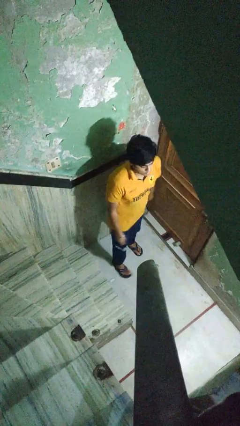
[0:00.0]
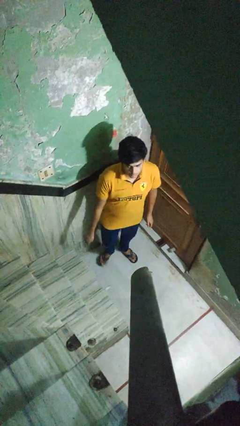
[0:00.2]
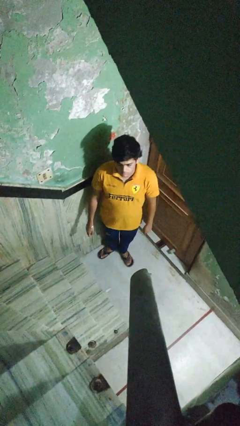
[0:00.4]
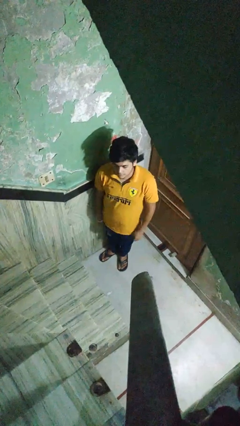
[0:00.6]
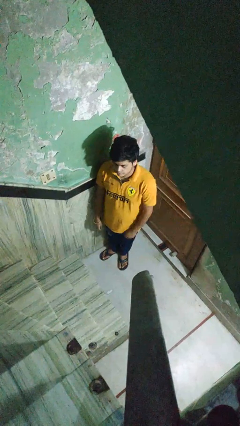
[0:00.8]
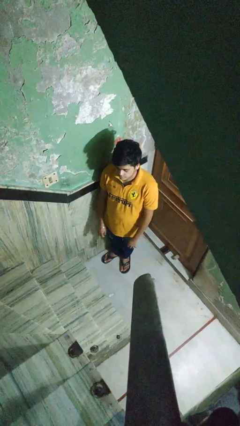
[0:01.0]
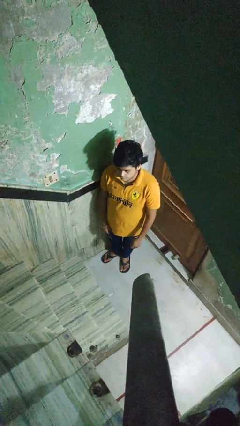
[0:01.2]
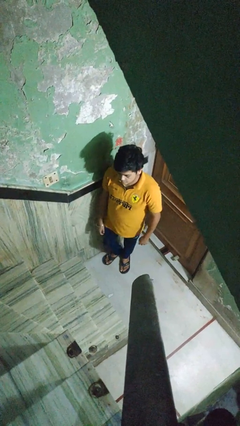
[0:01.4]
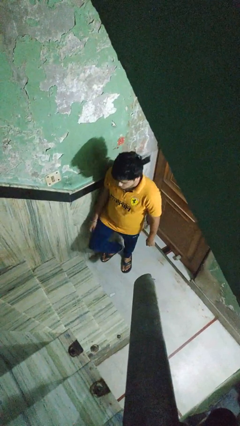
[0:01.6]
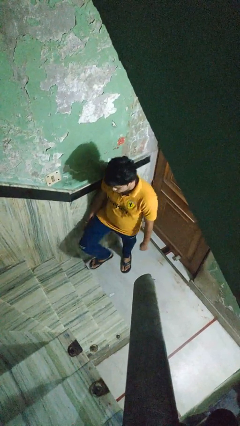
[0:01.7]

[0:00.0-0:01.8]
person climbs down stairs

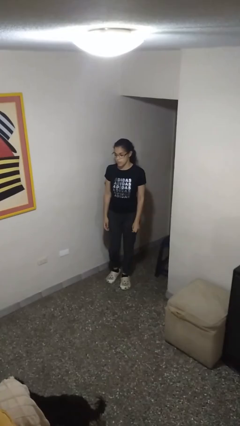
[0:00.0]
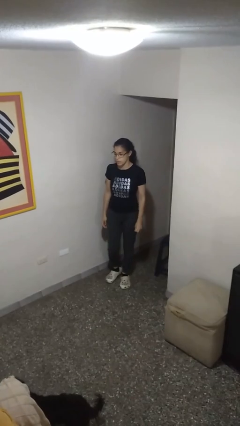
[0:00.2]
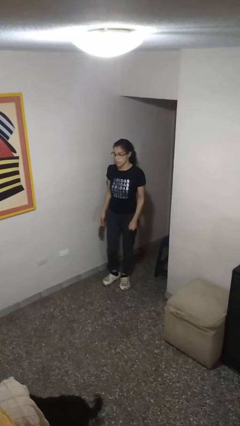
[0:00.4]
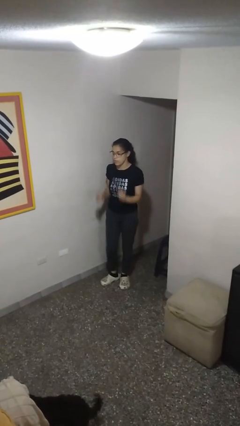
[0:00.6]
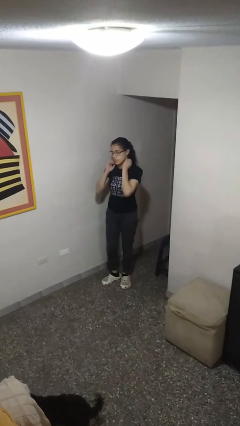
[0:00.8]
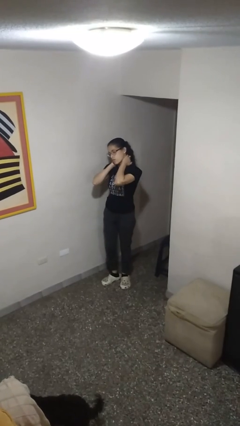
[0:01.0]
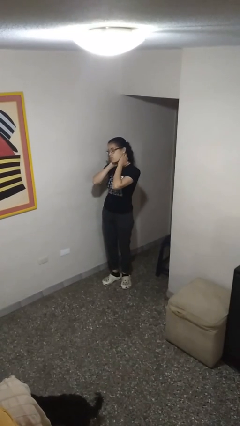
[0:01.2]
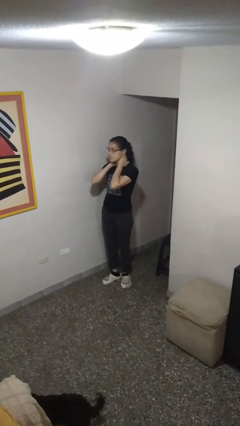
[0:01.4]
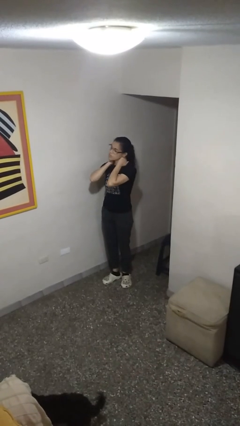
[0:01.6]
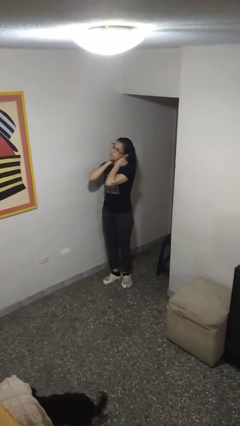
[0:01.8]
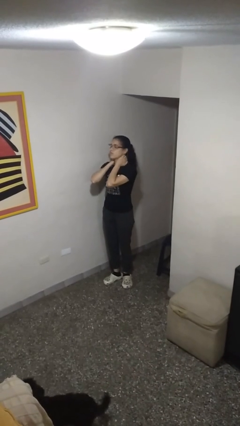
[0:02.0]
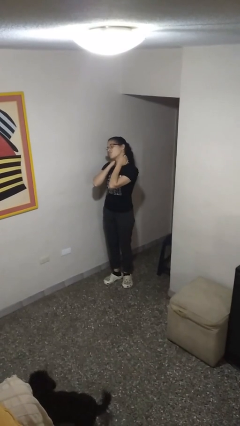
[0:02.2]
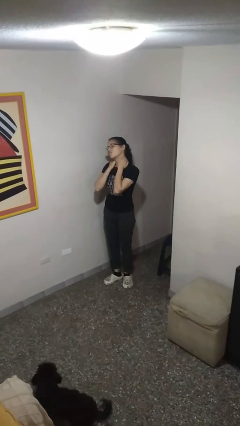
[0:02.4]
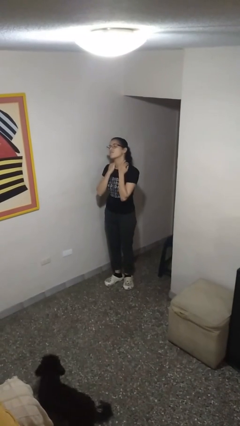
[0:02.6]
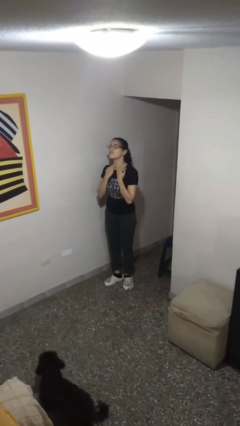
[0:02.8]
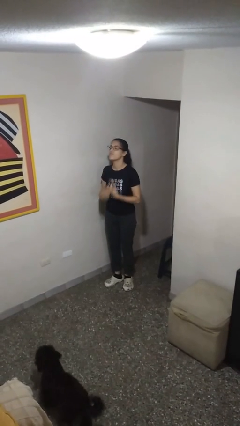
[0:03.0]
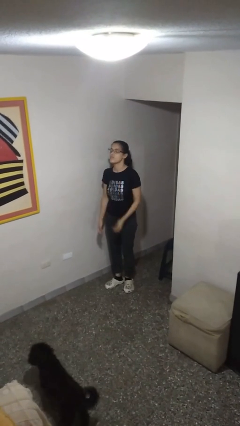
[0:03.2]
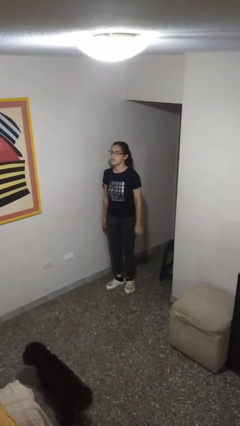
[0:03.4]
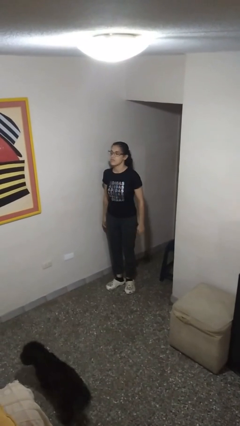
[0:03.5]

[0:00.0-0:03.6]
person rubs neck

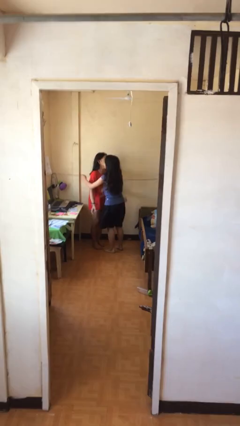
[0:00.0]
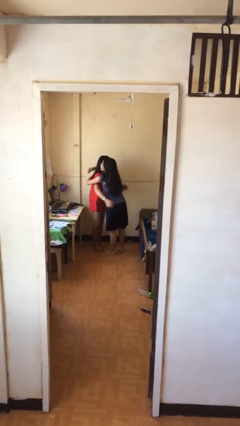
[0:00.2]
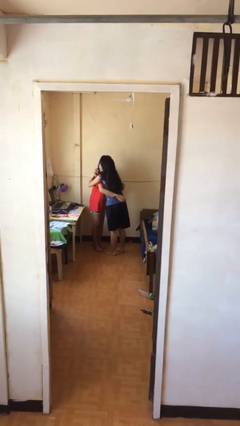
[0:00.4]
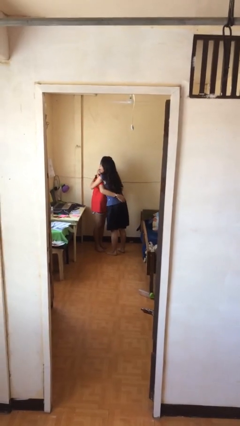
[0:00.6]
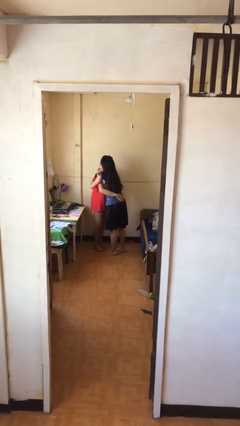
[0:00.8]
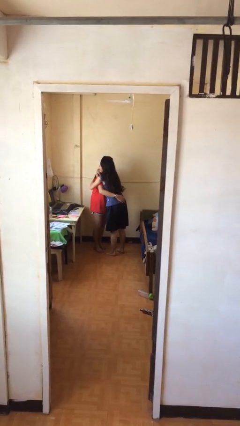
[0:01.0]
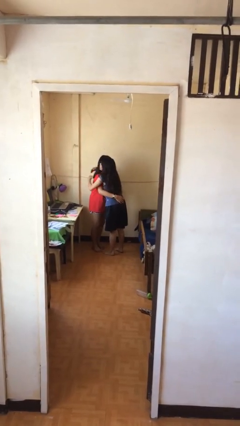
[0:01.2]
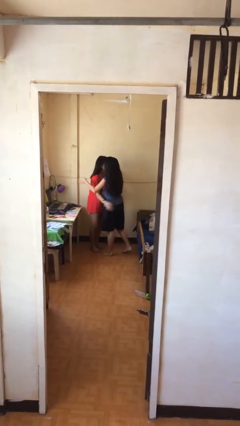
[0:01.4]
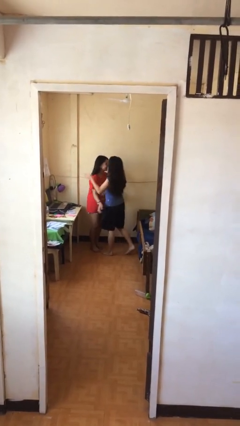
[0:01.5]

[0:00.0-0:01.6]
person embraces person

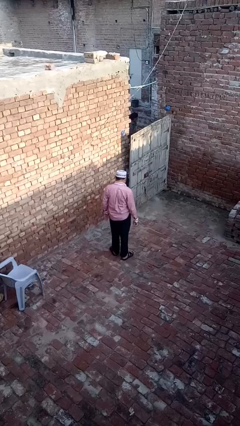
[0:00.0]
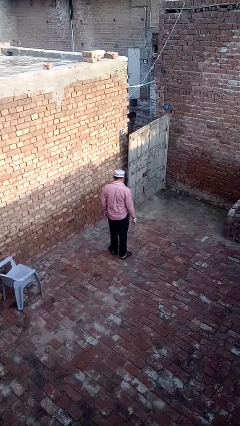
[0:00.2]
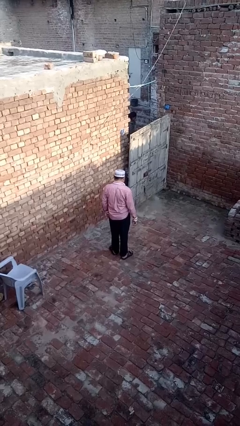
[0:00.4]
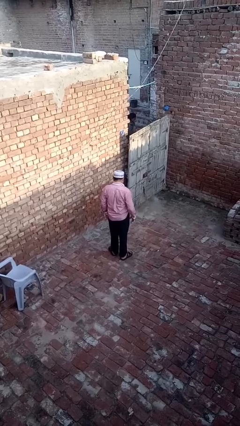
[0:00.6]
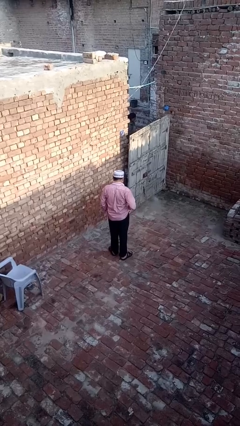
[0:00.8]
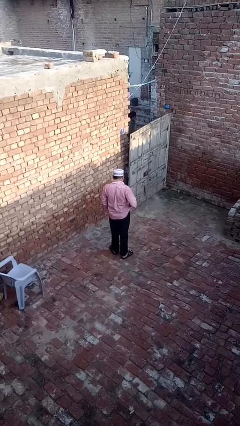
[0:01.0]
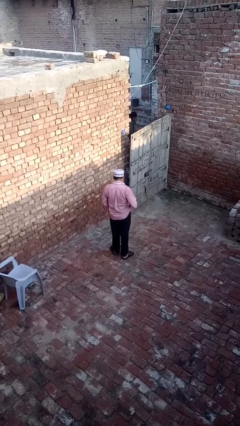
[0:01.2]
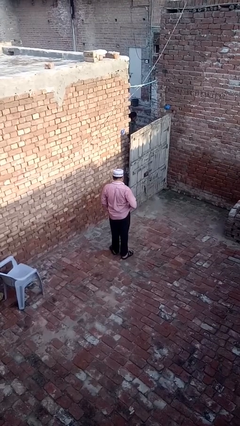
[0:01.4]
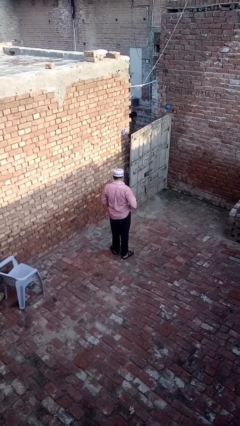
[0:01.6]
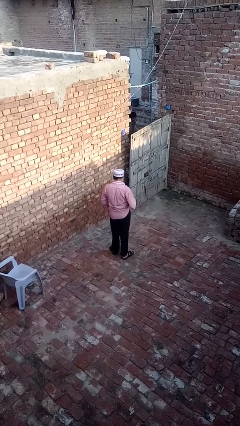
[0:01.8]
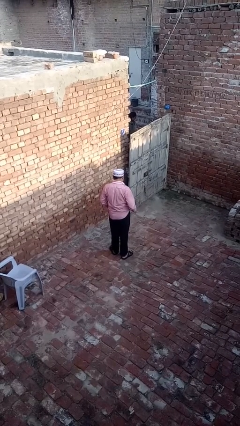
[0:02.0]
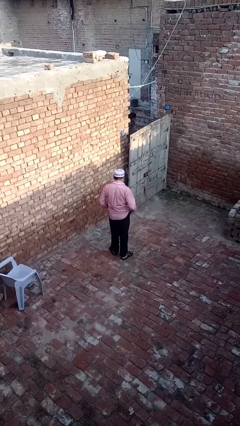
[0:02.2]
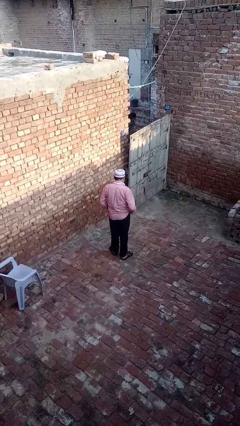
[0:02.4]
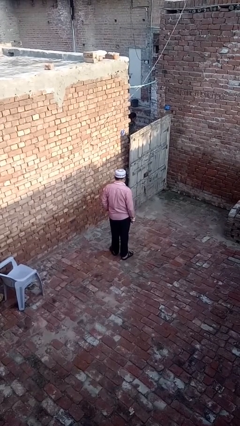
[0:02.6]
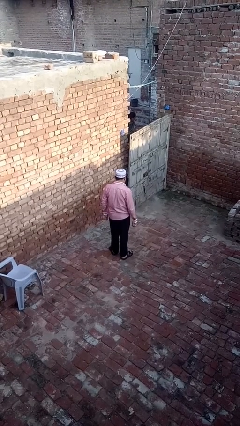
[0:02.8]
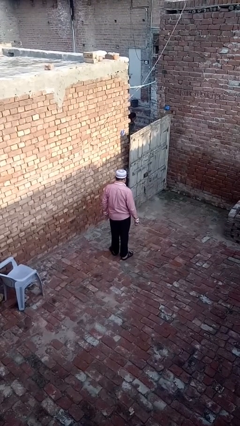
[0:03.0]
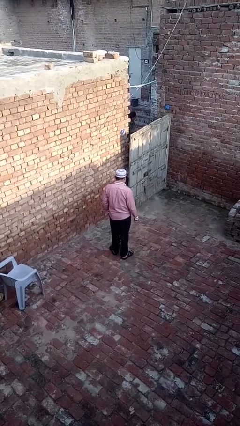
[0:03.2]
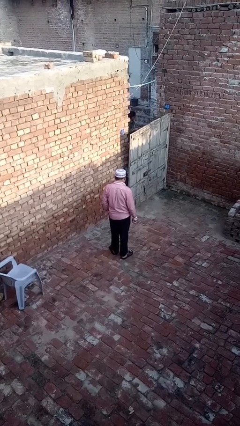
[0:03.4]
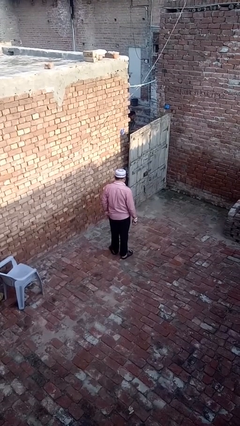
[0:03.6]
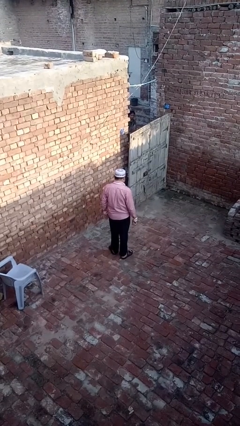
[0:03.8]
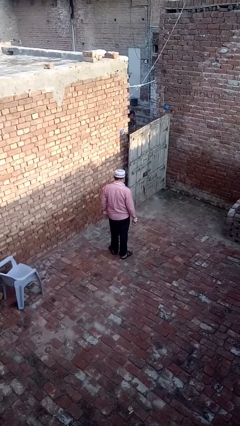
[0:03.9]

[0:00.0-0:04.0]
person untucks shirt

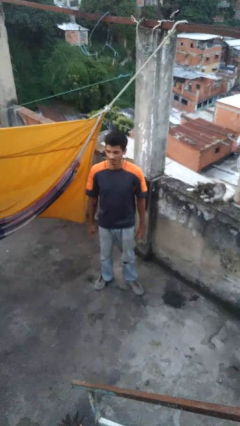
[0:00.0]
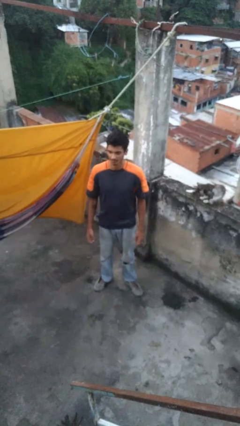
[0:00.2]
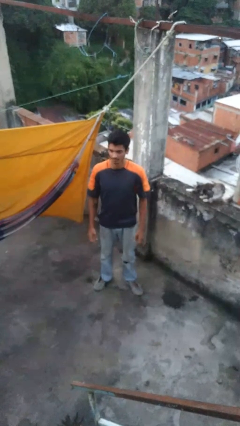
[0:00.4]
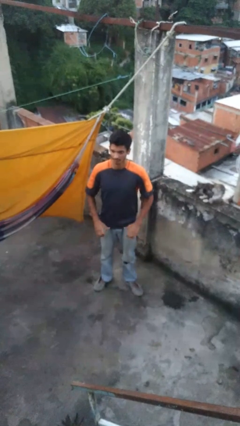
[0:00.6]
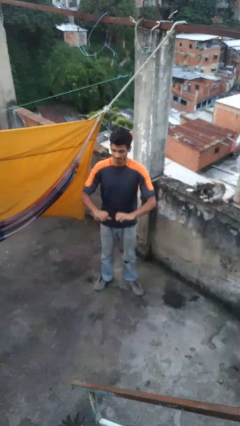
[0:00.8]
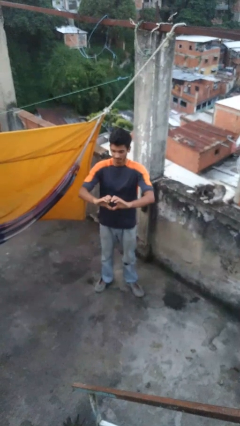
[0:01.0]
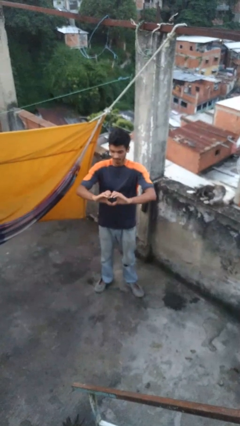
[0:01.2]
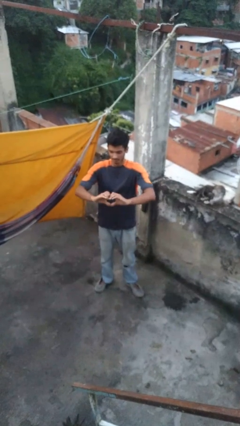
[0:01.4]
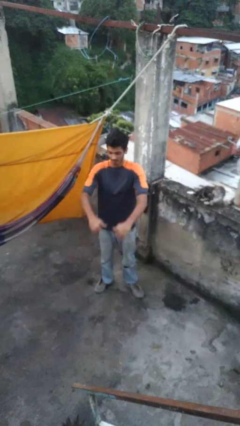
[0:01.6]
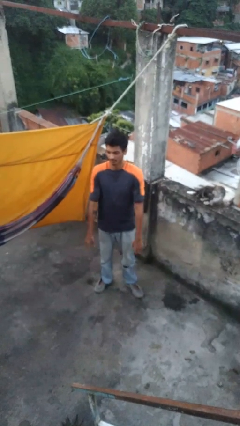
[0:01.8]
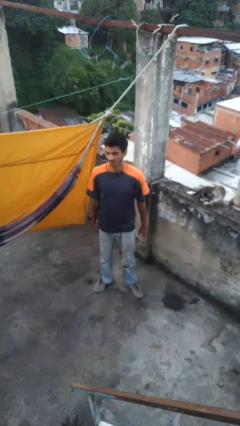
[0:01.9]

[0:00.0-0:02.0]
person gestures heart

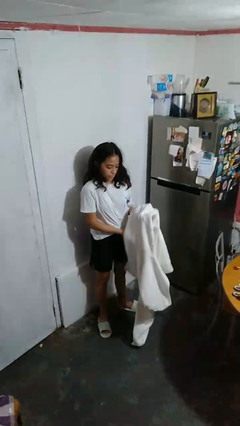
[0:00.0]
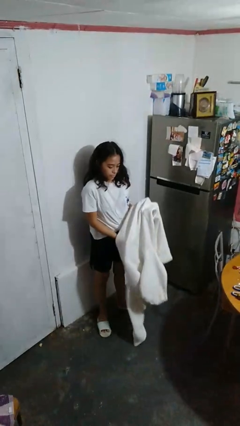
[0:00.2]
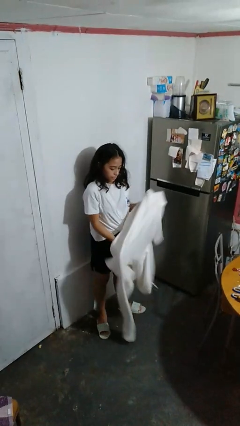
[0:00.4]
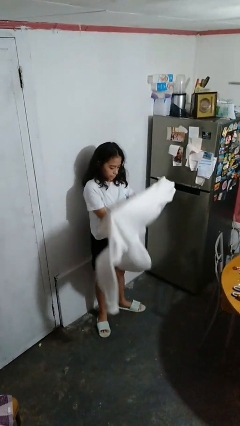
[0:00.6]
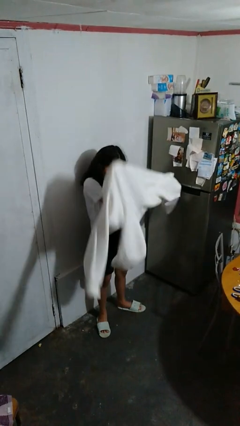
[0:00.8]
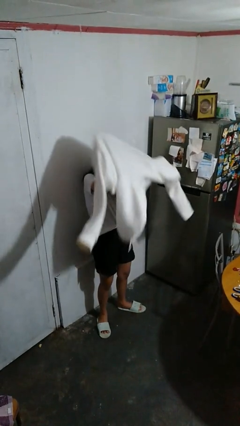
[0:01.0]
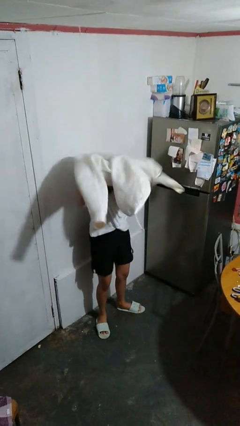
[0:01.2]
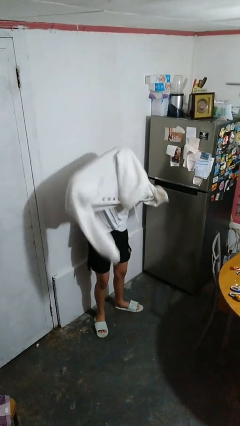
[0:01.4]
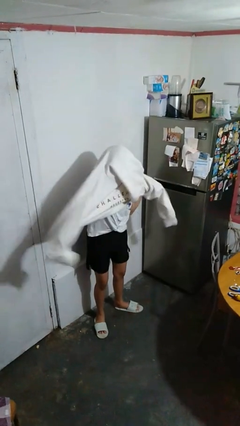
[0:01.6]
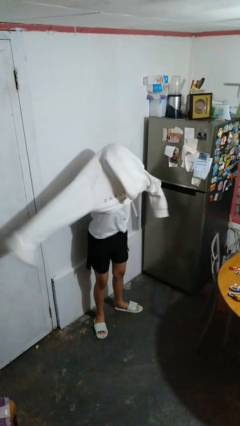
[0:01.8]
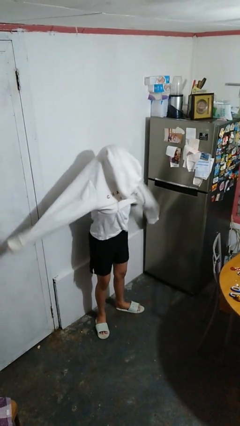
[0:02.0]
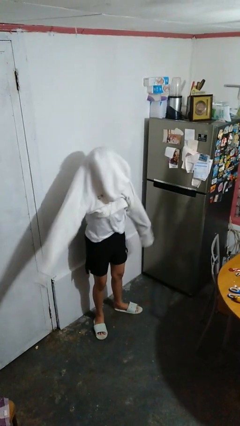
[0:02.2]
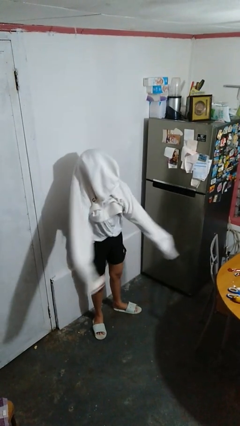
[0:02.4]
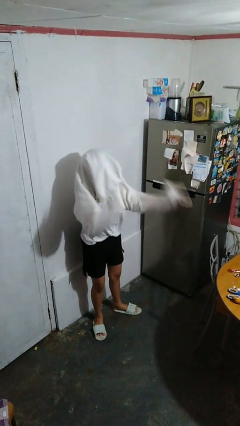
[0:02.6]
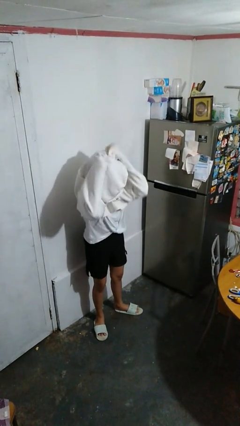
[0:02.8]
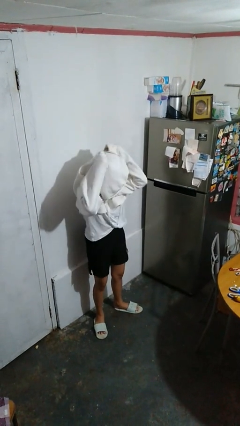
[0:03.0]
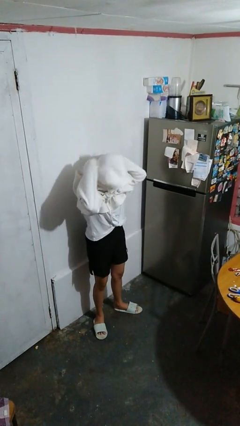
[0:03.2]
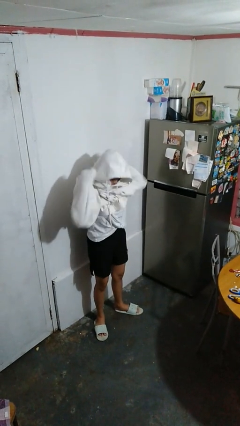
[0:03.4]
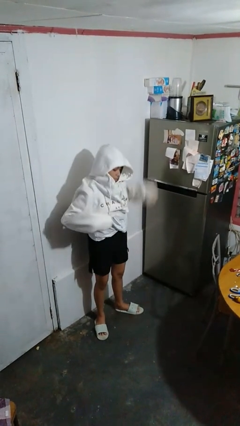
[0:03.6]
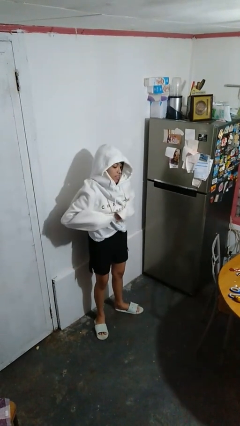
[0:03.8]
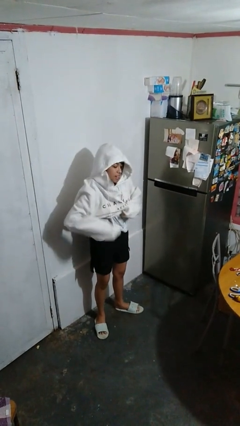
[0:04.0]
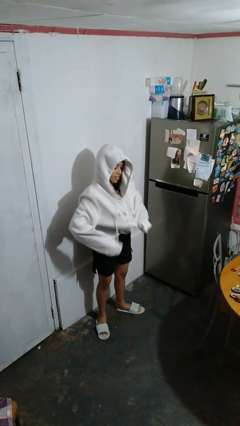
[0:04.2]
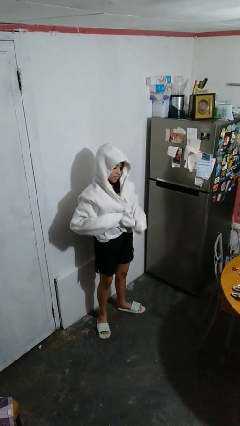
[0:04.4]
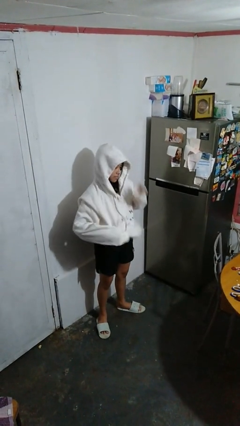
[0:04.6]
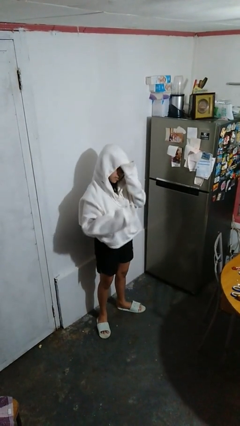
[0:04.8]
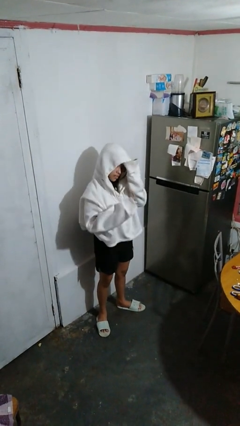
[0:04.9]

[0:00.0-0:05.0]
person puts on hoodie
